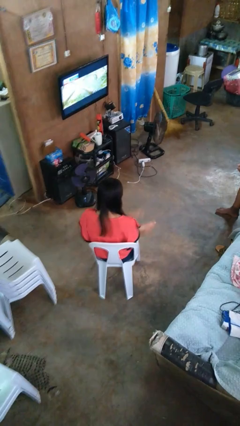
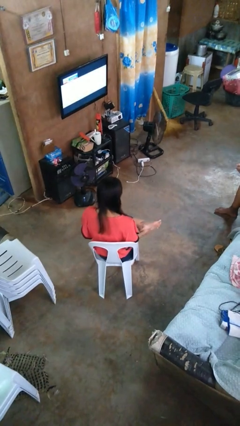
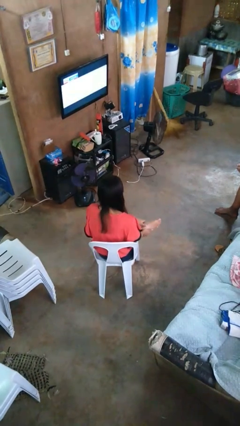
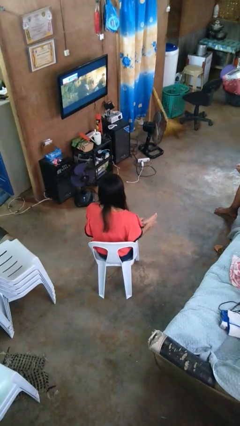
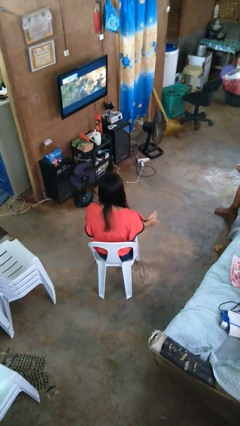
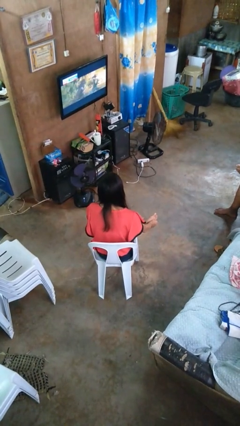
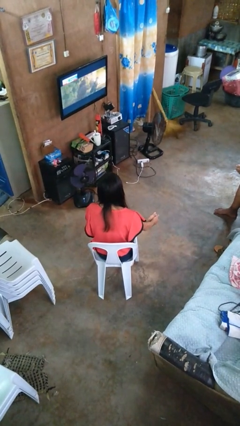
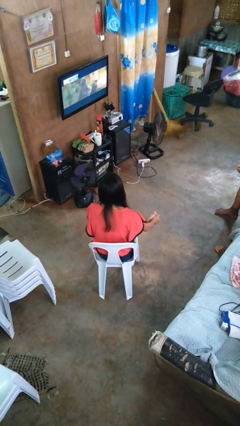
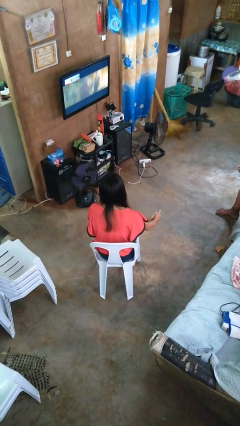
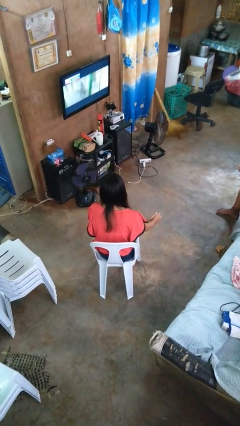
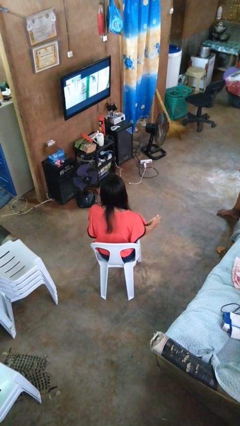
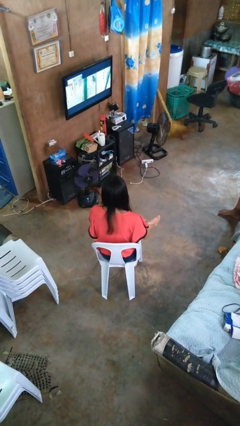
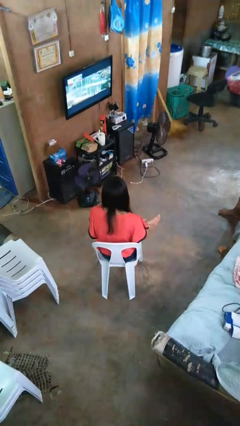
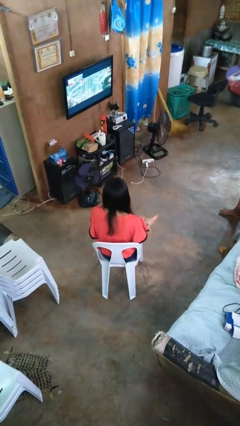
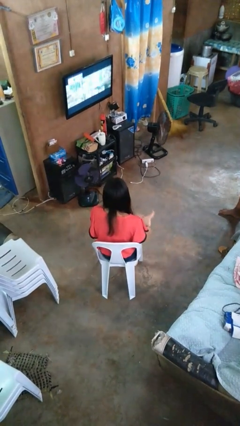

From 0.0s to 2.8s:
person rubs foot

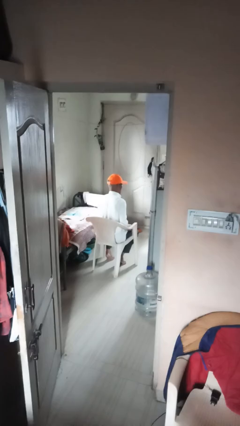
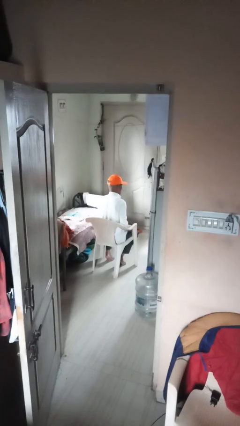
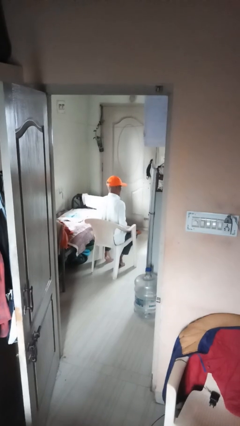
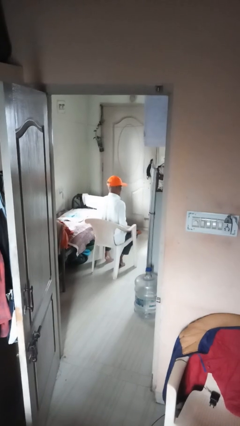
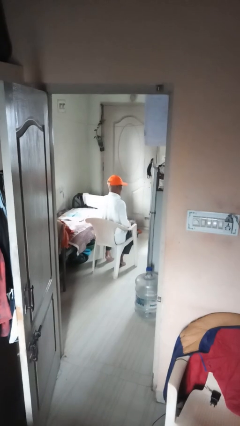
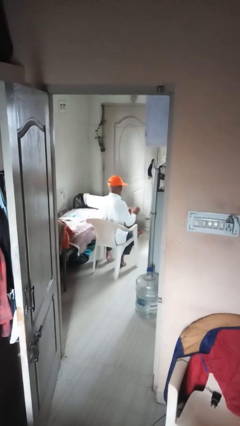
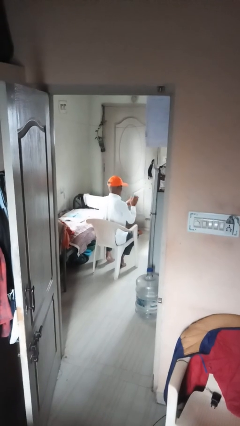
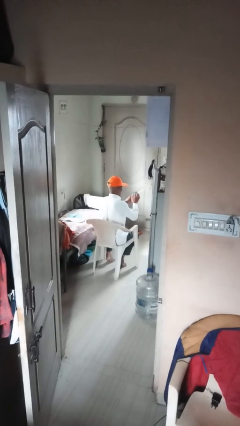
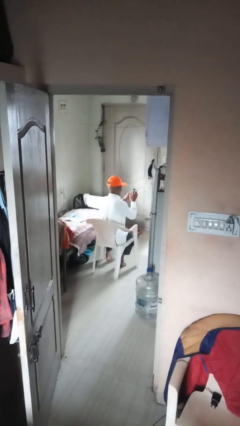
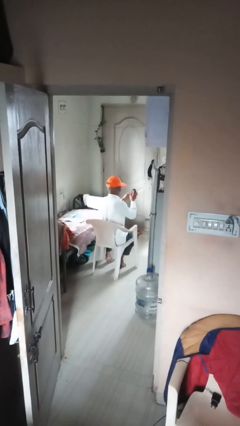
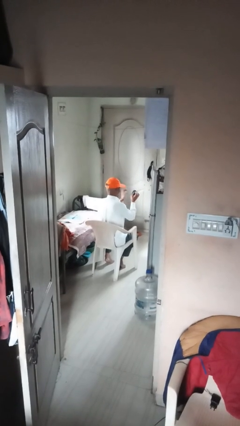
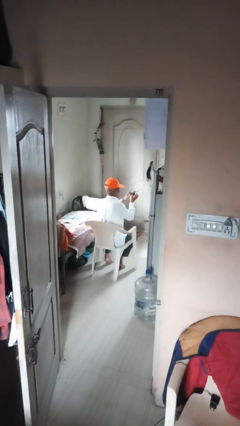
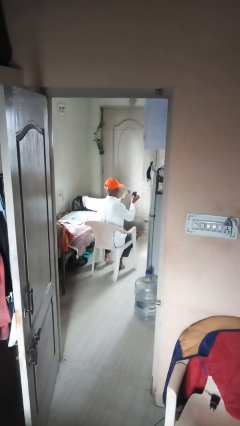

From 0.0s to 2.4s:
person taps object with finger

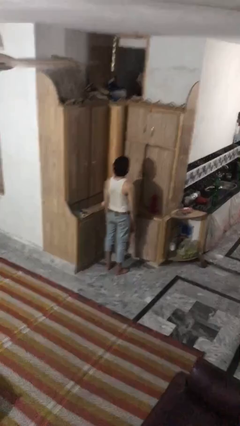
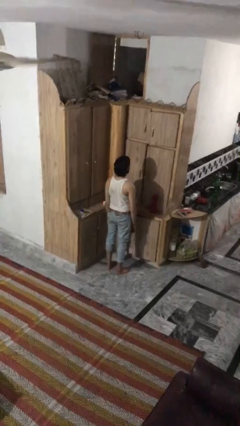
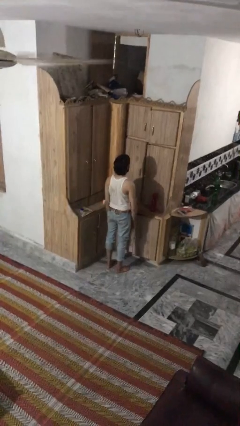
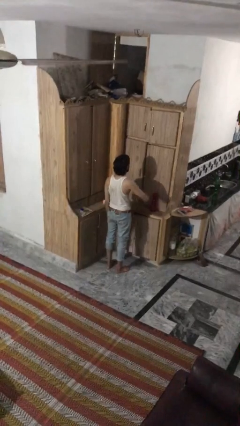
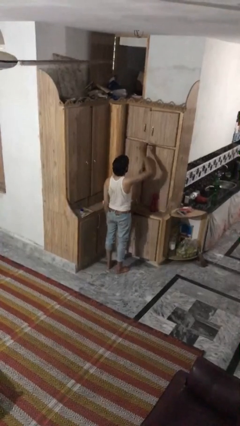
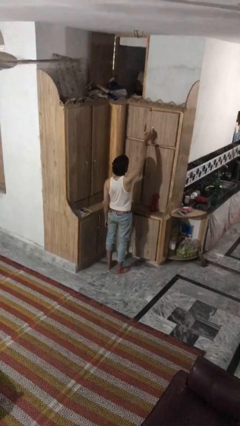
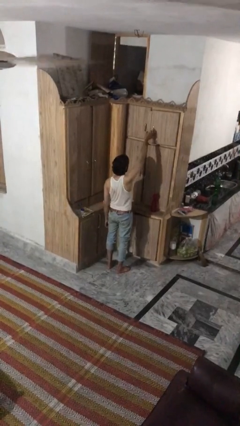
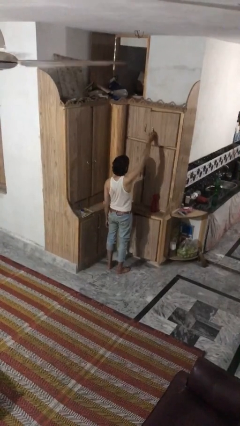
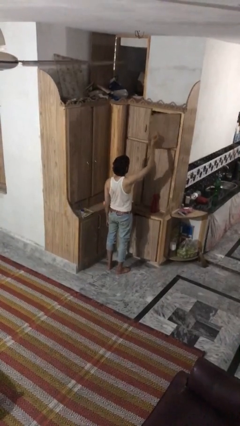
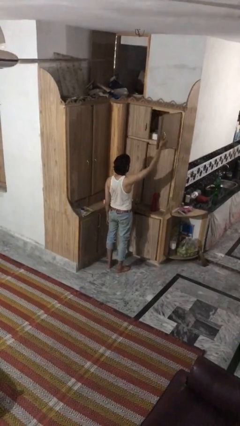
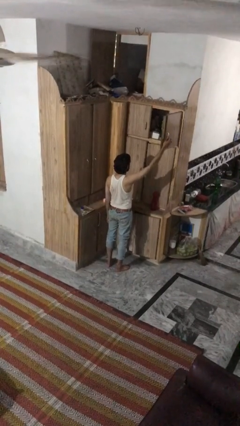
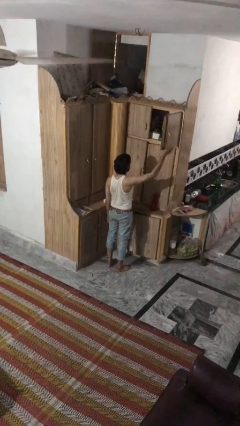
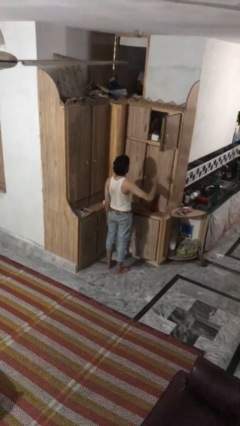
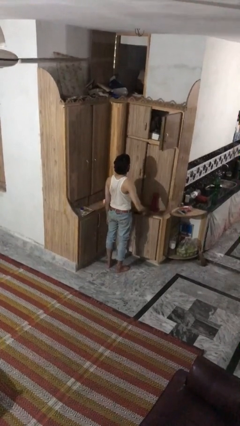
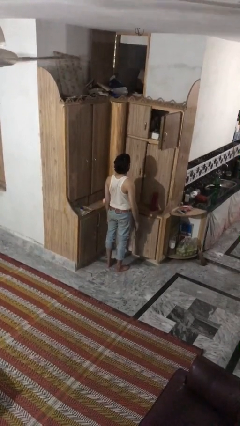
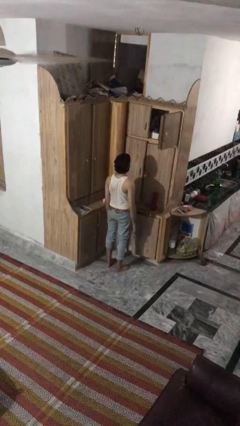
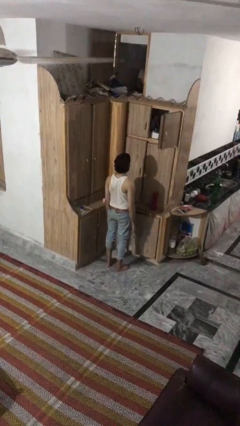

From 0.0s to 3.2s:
person opens cabinet

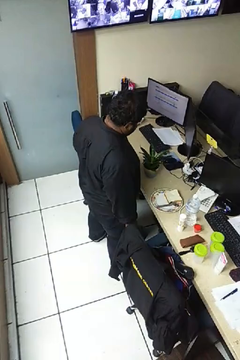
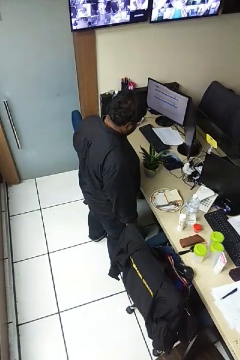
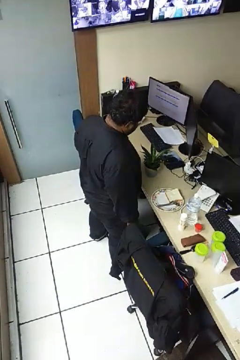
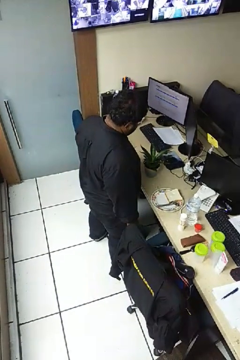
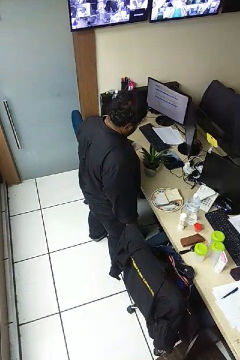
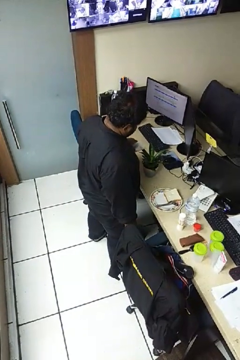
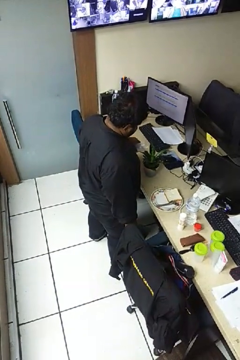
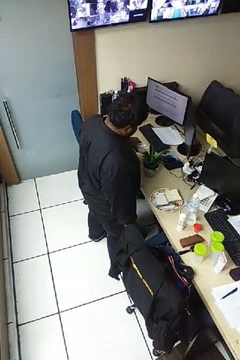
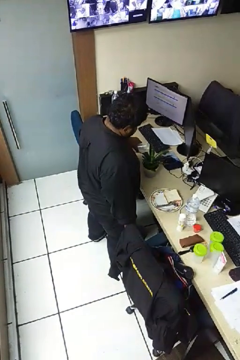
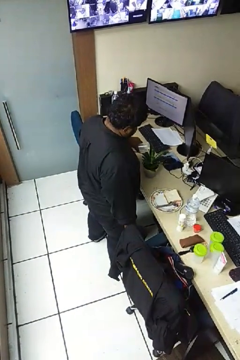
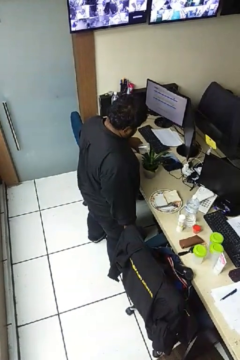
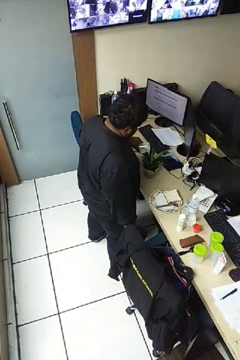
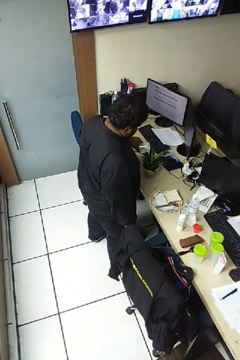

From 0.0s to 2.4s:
person waters houseplant

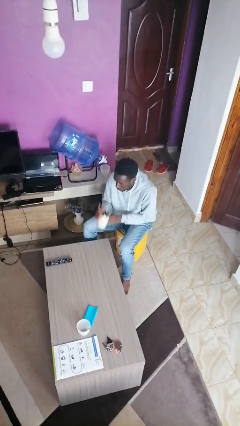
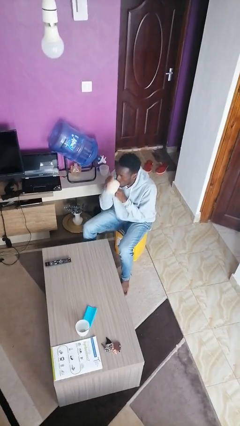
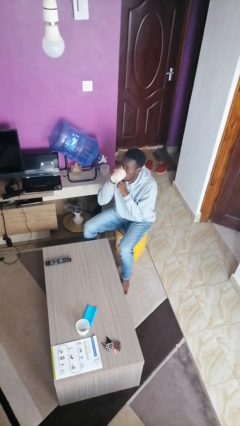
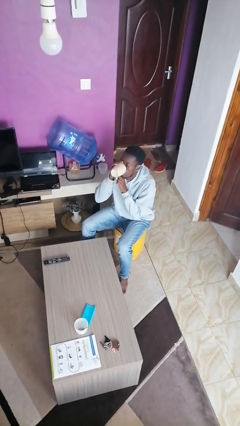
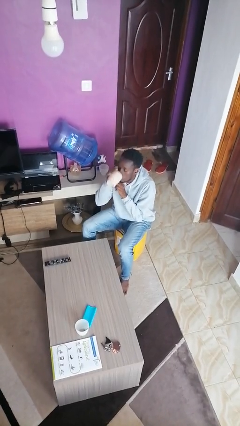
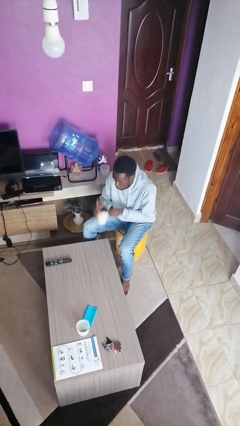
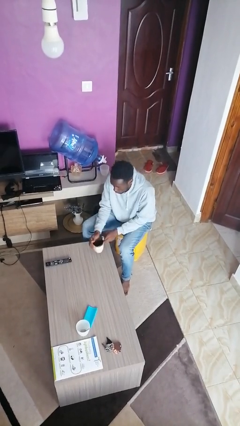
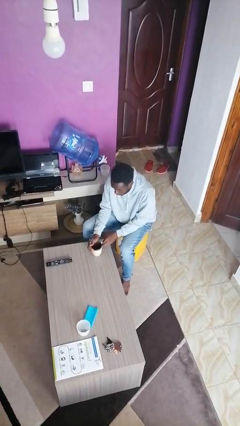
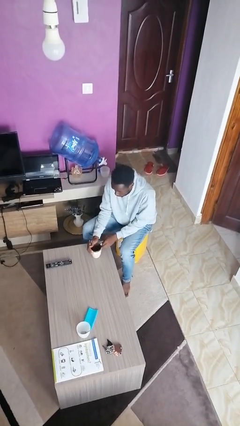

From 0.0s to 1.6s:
person drinks from mug

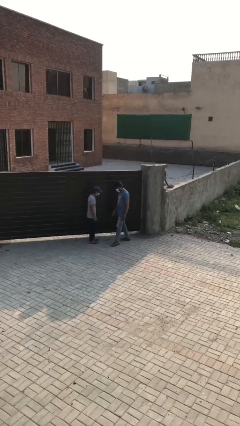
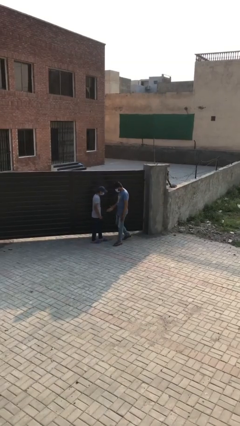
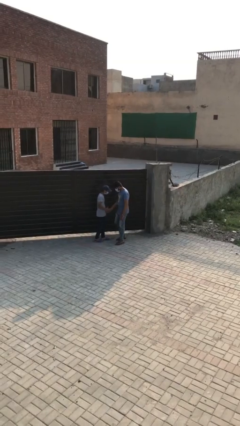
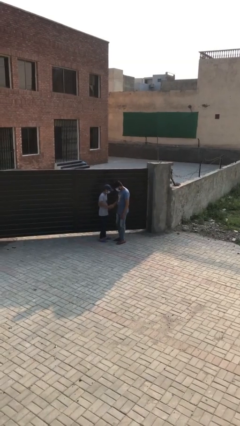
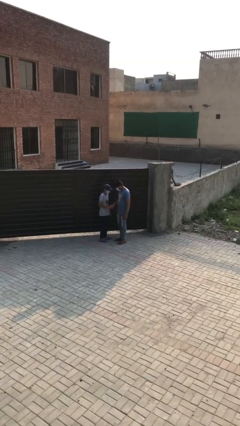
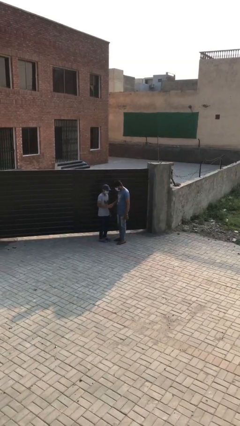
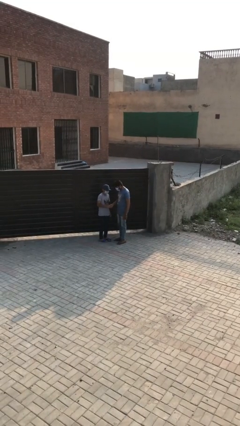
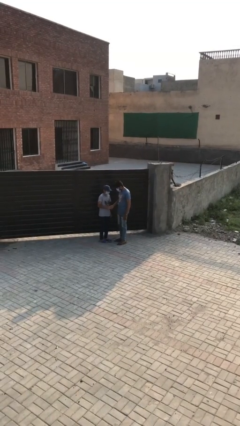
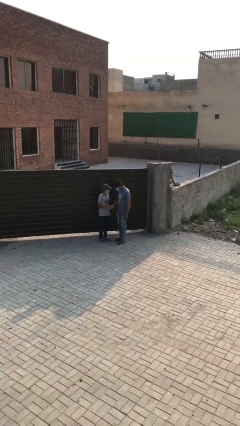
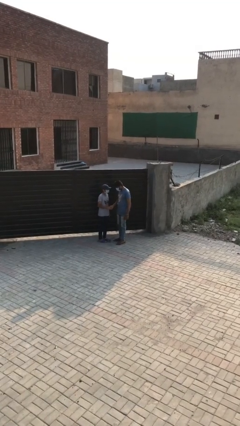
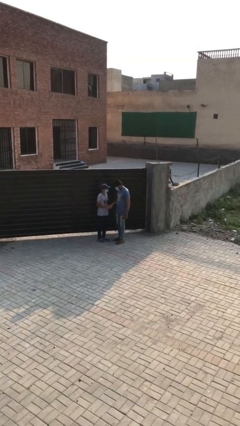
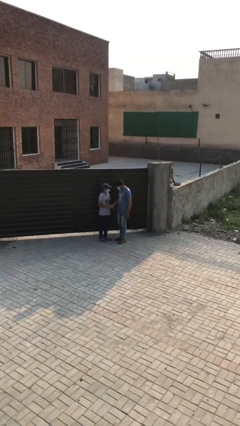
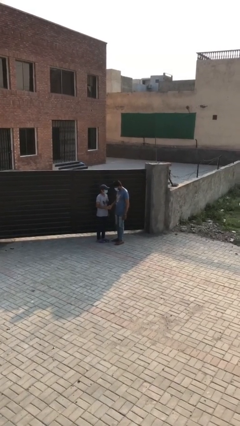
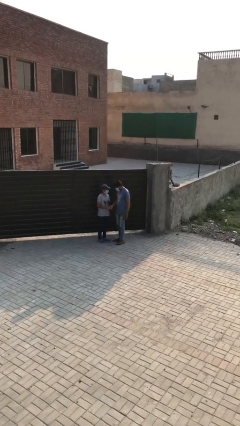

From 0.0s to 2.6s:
person shakes hand

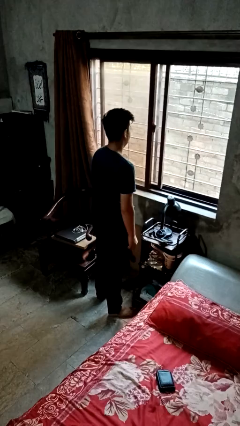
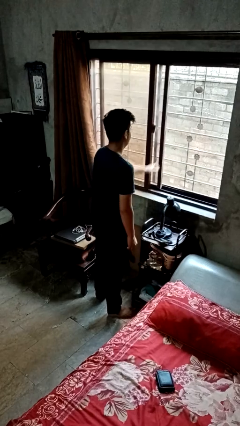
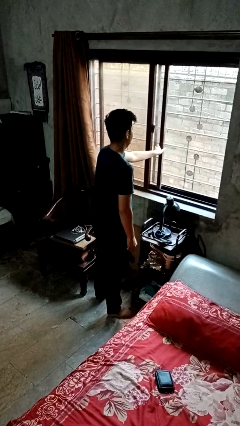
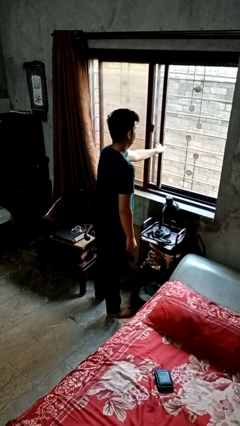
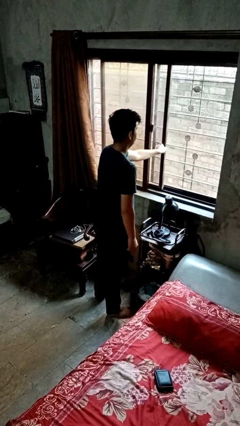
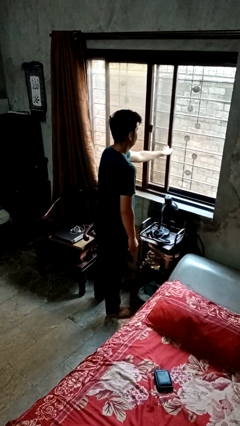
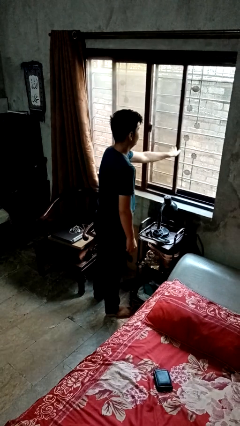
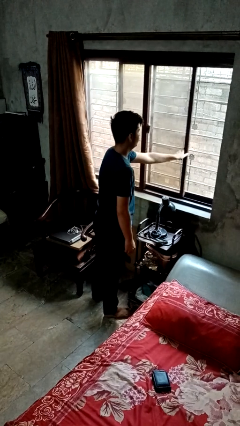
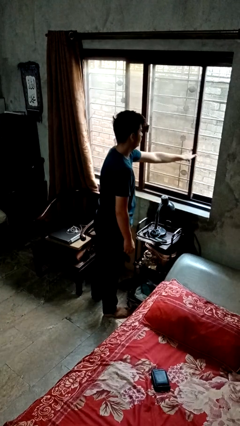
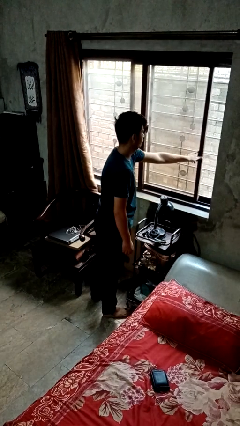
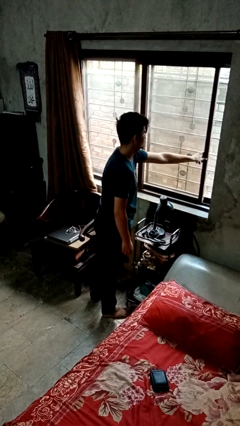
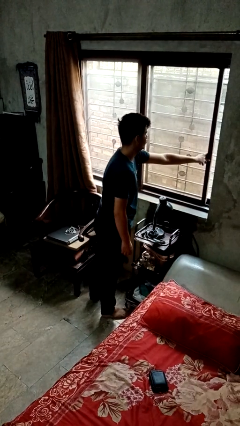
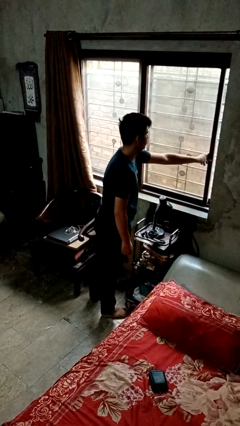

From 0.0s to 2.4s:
person closes home window

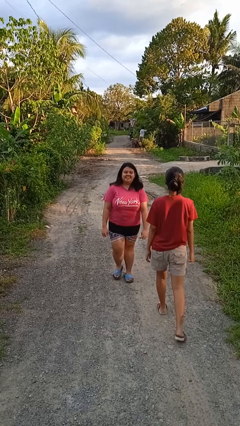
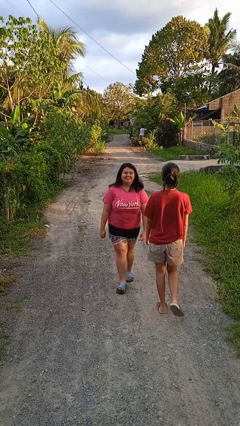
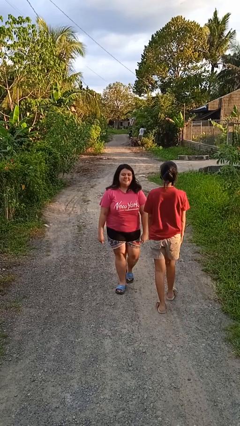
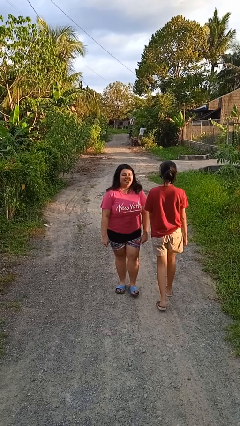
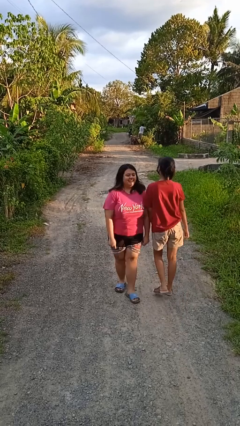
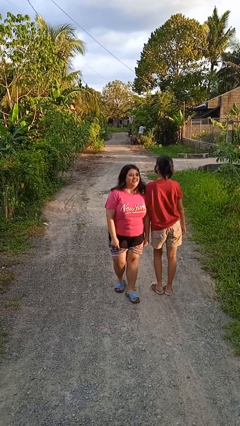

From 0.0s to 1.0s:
person bumps into person
